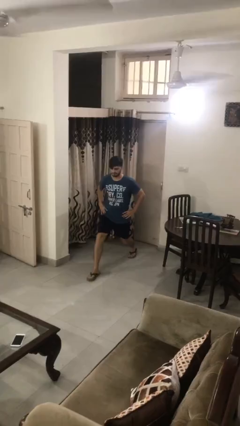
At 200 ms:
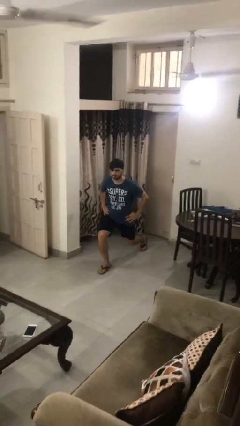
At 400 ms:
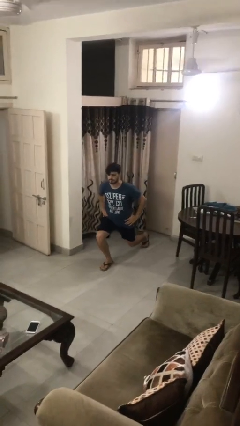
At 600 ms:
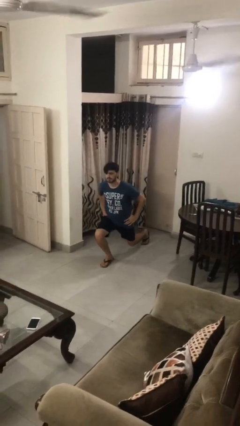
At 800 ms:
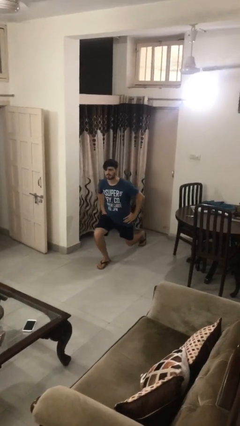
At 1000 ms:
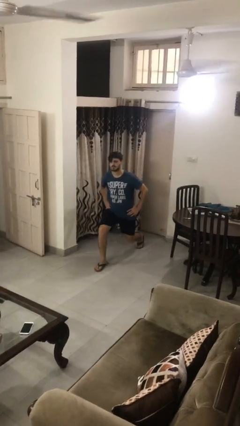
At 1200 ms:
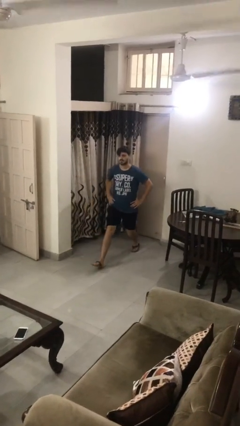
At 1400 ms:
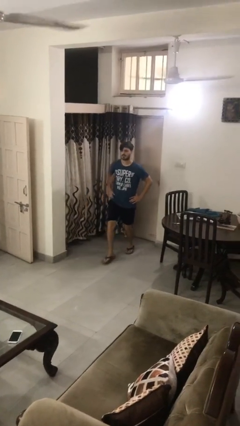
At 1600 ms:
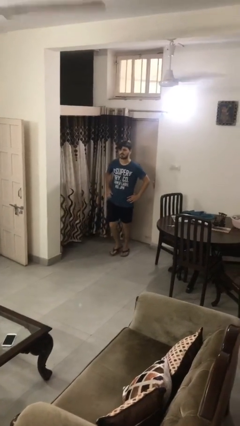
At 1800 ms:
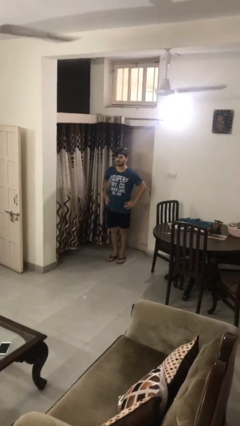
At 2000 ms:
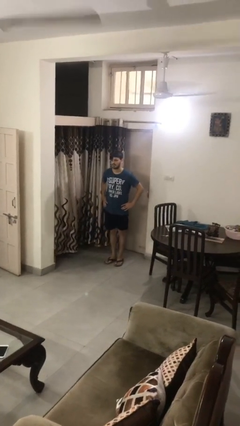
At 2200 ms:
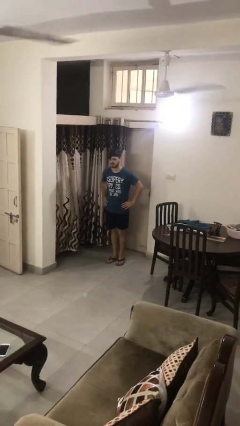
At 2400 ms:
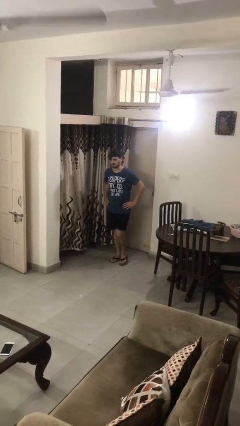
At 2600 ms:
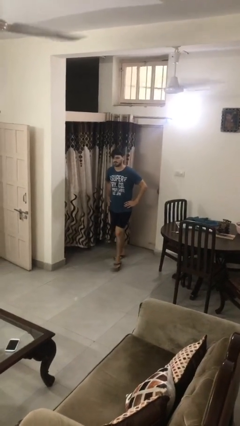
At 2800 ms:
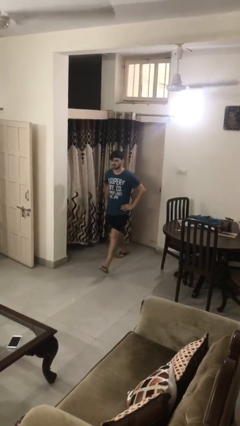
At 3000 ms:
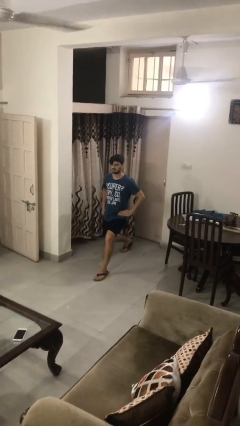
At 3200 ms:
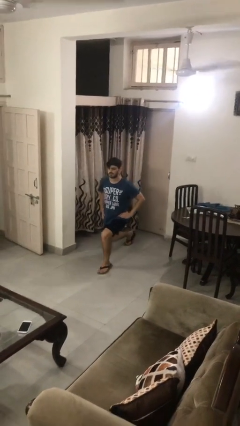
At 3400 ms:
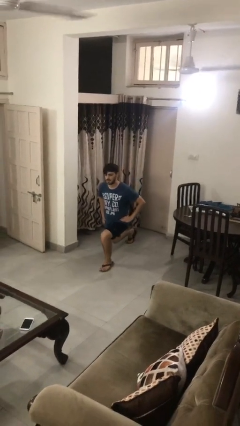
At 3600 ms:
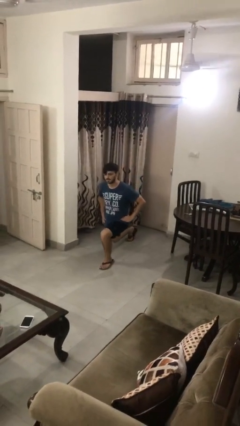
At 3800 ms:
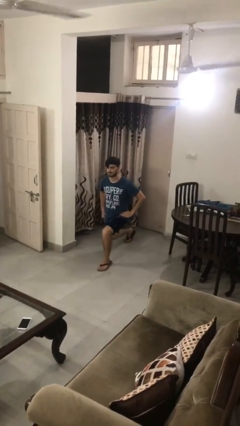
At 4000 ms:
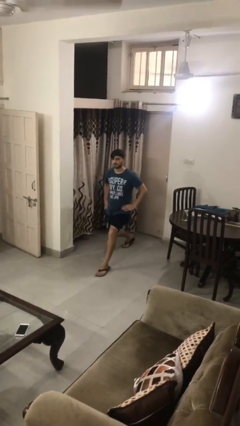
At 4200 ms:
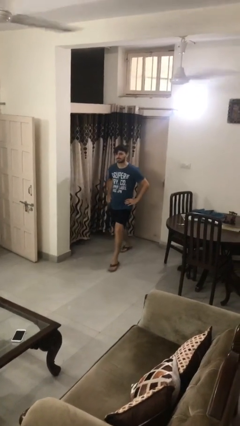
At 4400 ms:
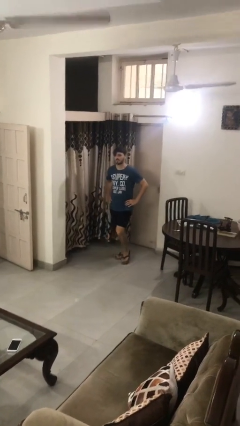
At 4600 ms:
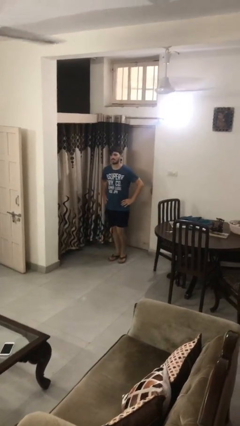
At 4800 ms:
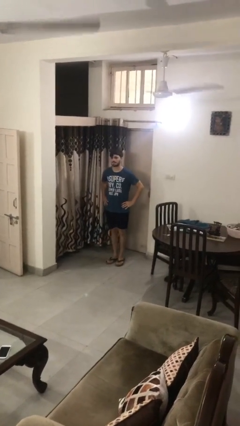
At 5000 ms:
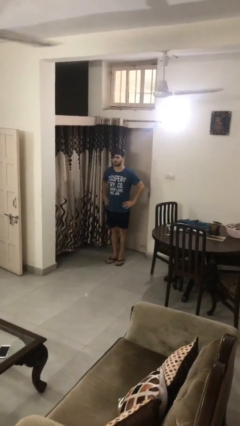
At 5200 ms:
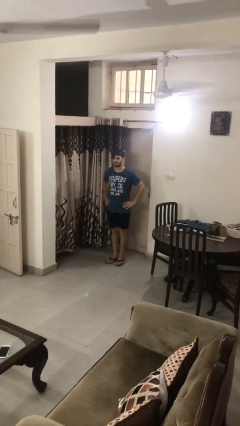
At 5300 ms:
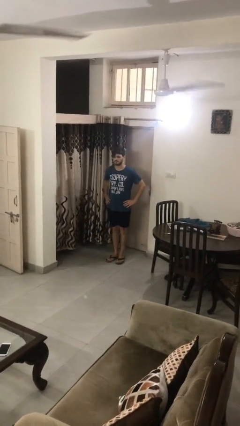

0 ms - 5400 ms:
person exercises with lunges

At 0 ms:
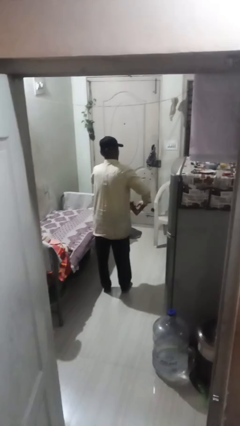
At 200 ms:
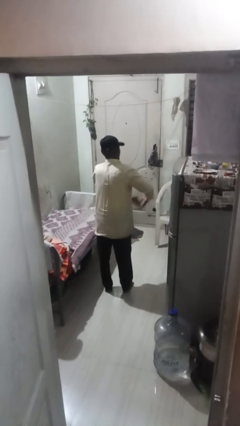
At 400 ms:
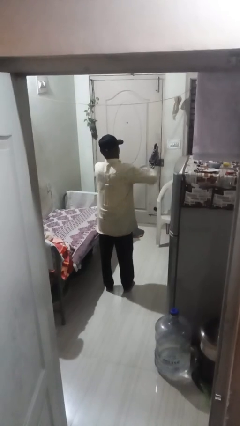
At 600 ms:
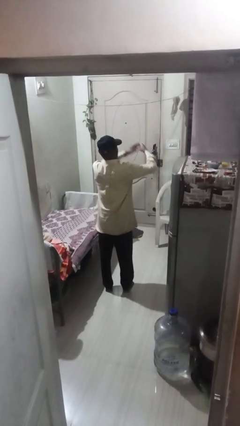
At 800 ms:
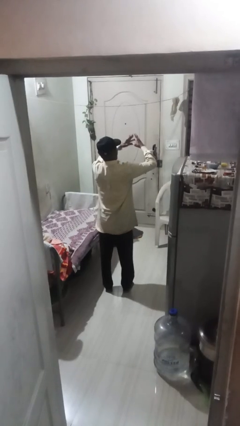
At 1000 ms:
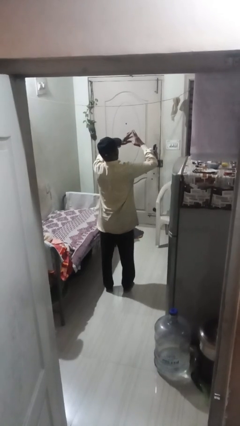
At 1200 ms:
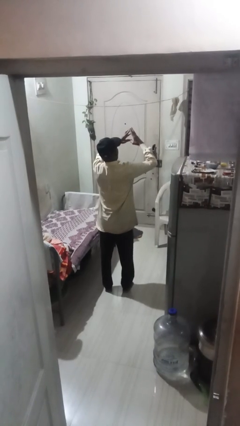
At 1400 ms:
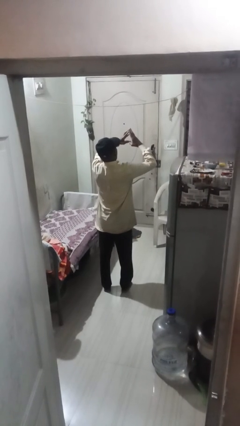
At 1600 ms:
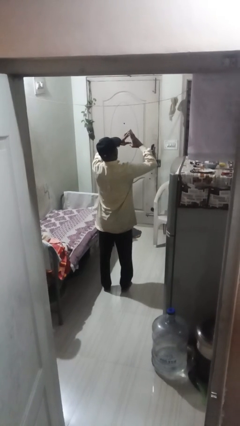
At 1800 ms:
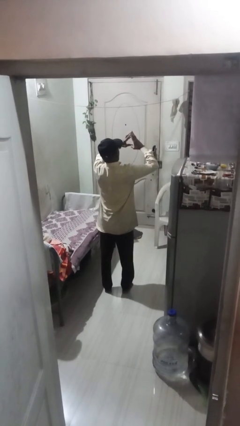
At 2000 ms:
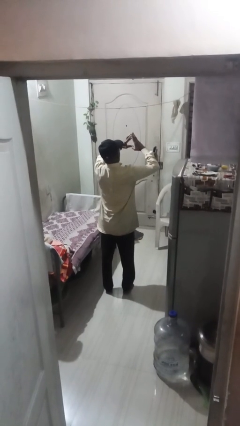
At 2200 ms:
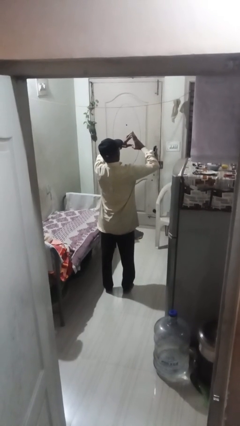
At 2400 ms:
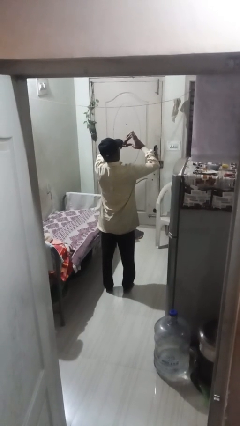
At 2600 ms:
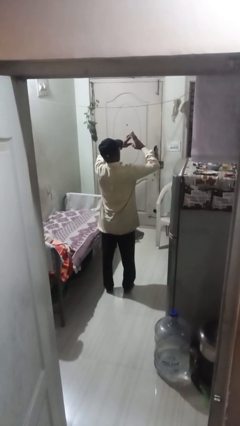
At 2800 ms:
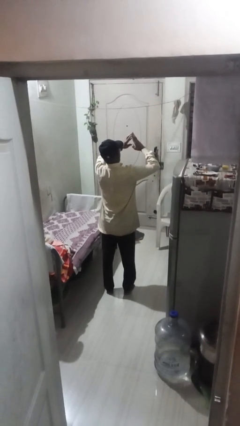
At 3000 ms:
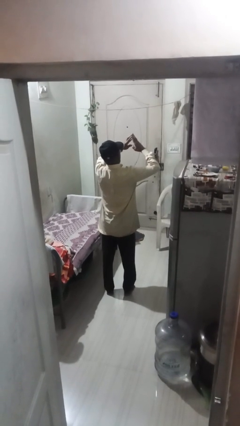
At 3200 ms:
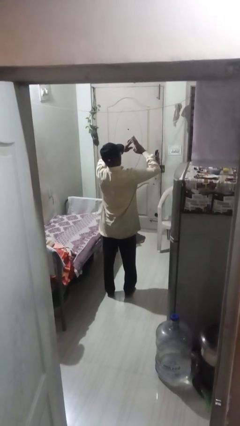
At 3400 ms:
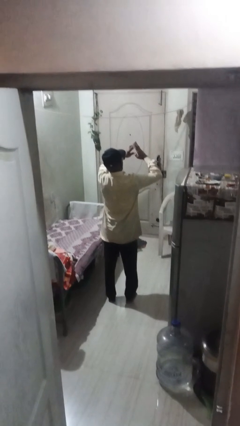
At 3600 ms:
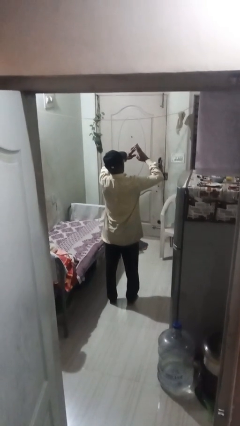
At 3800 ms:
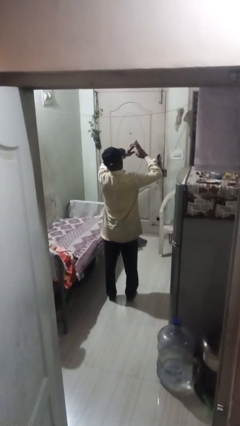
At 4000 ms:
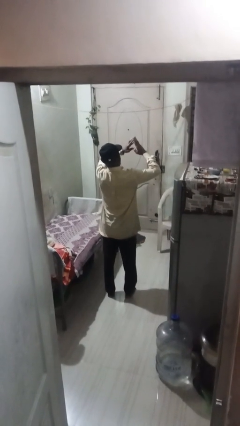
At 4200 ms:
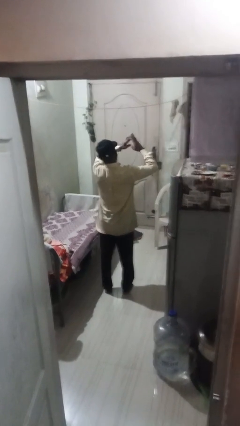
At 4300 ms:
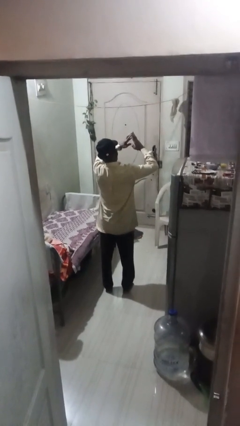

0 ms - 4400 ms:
person gestures heart

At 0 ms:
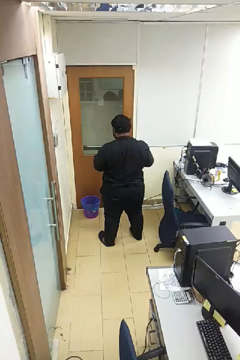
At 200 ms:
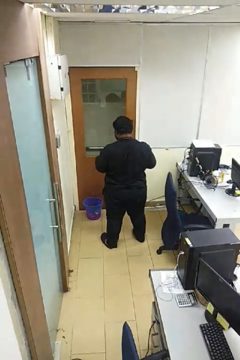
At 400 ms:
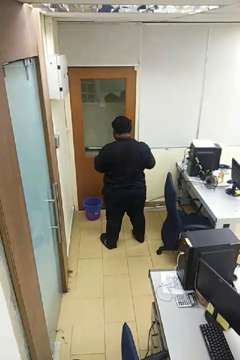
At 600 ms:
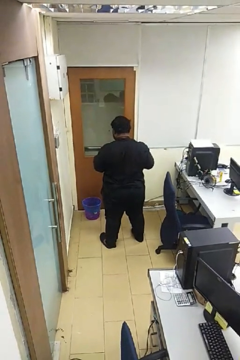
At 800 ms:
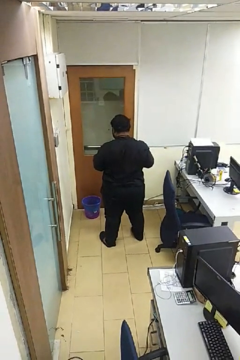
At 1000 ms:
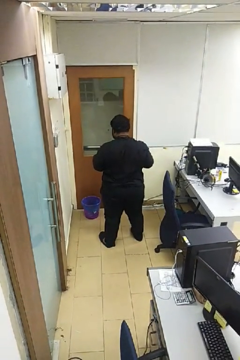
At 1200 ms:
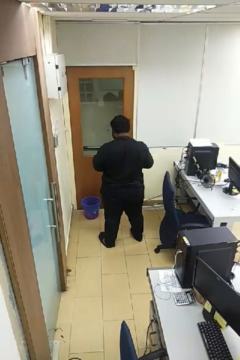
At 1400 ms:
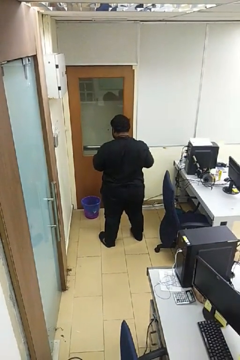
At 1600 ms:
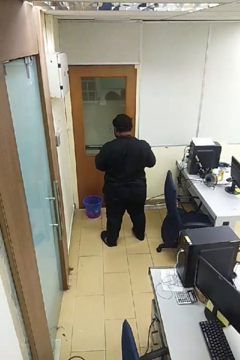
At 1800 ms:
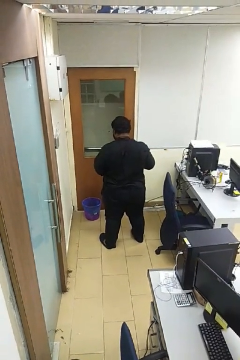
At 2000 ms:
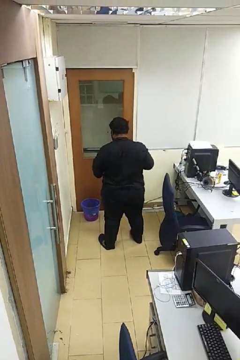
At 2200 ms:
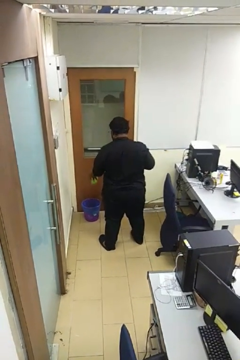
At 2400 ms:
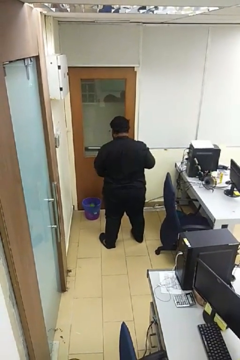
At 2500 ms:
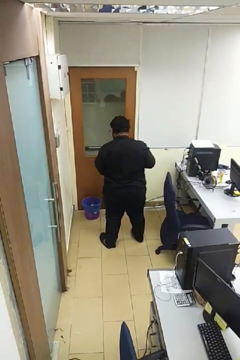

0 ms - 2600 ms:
person discards trash

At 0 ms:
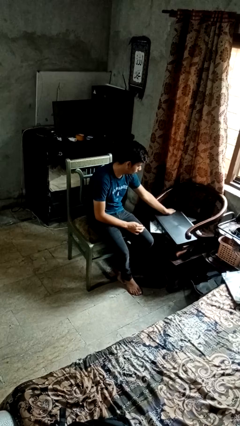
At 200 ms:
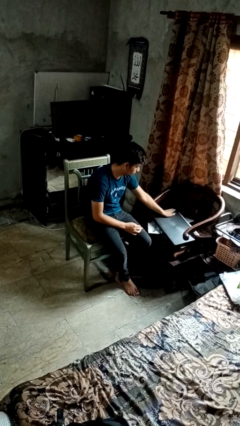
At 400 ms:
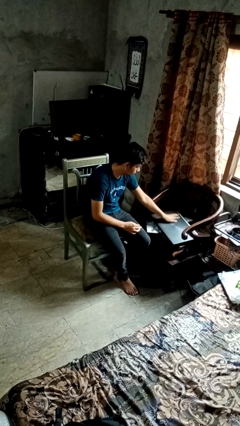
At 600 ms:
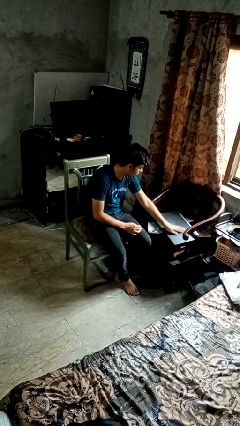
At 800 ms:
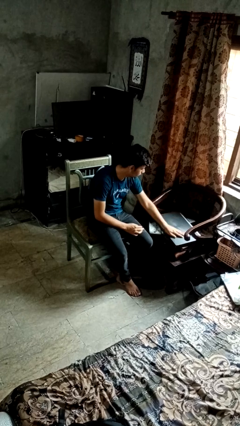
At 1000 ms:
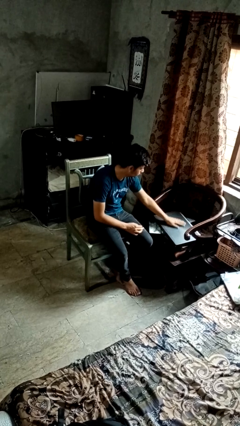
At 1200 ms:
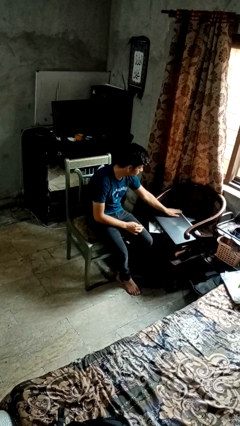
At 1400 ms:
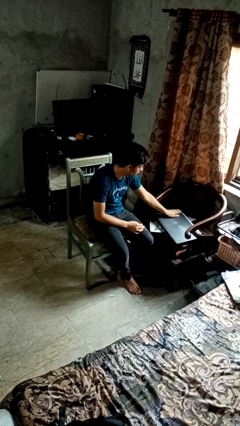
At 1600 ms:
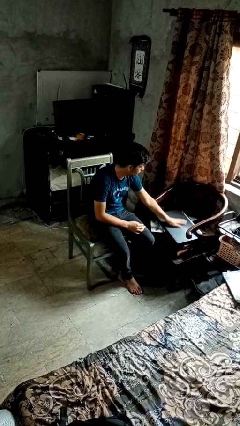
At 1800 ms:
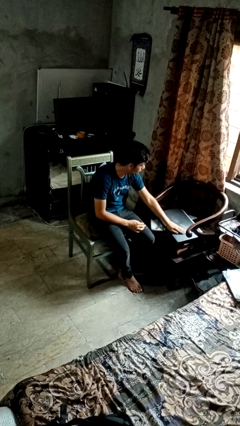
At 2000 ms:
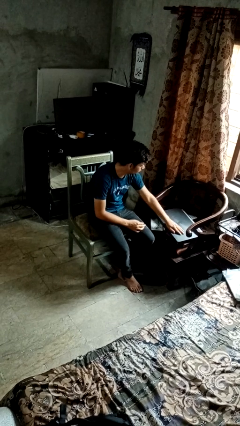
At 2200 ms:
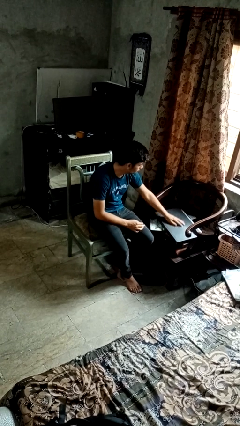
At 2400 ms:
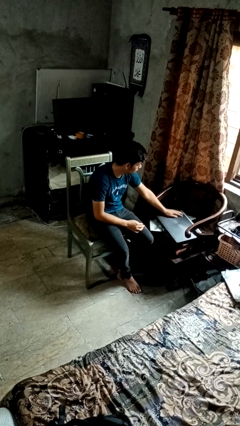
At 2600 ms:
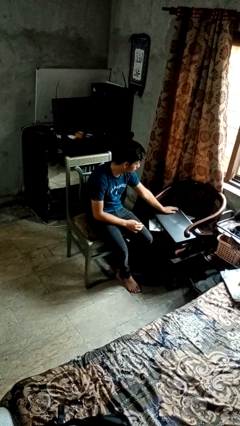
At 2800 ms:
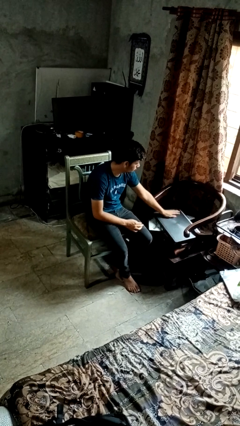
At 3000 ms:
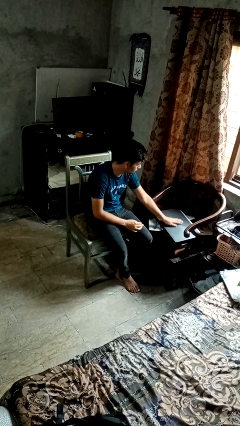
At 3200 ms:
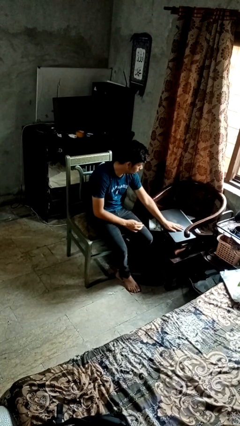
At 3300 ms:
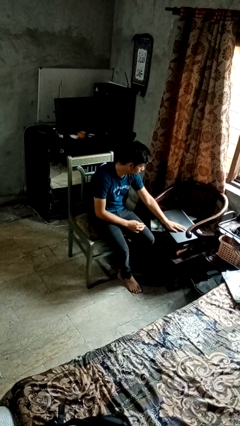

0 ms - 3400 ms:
person waves hand over object

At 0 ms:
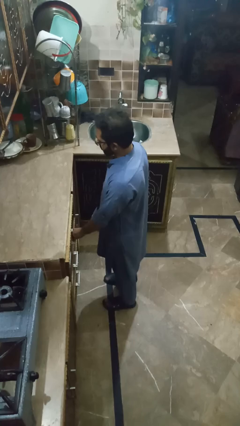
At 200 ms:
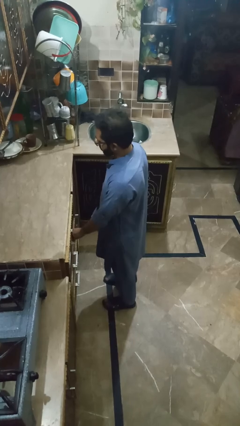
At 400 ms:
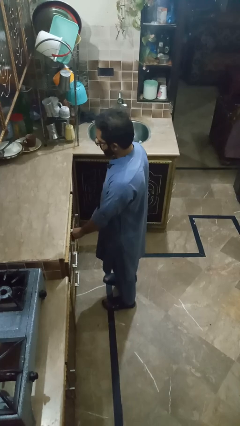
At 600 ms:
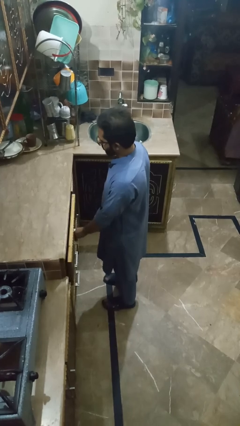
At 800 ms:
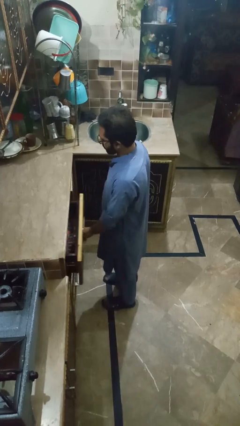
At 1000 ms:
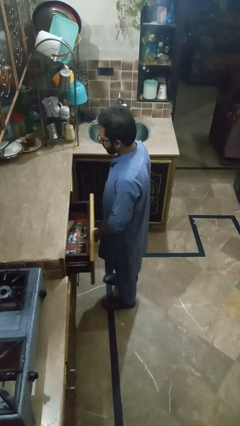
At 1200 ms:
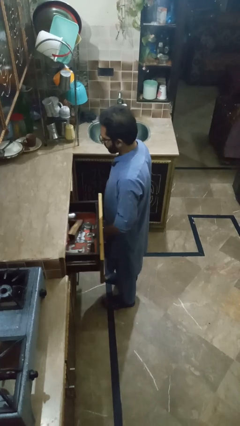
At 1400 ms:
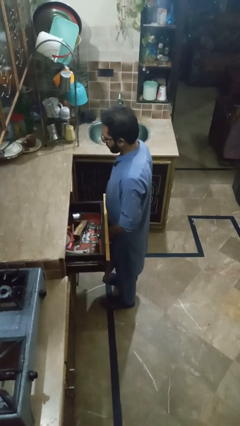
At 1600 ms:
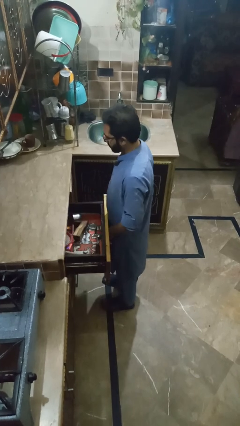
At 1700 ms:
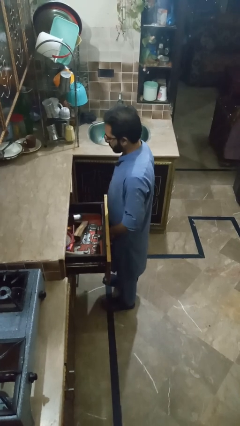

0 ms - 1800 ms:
person opens kitchen drawer

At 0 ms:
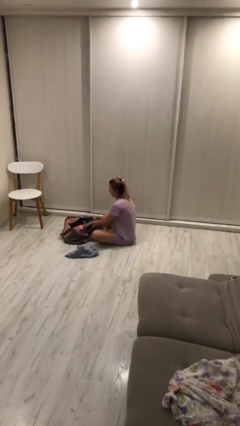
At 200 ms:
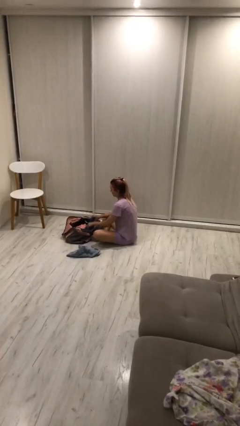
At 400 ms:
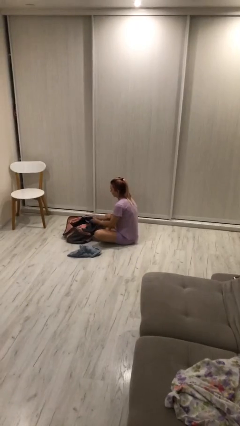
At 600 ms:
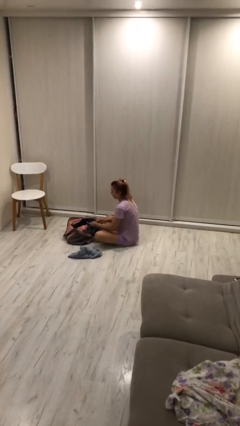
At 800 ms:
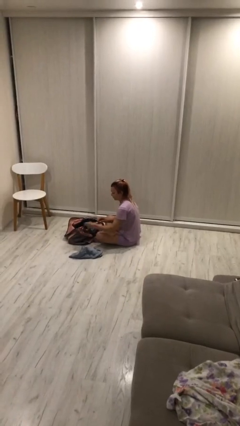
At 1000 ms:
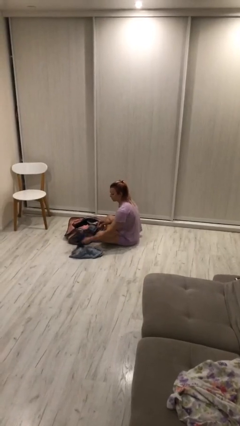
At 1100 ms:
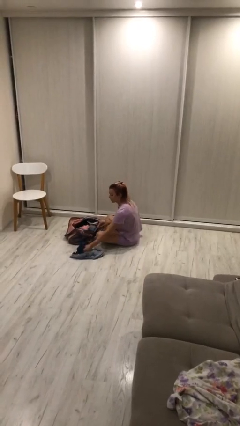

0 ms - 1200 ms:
person unloads clothes from suitcase
